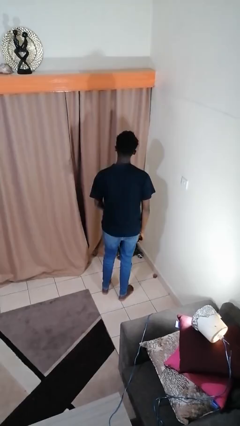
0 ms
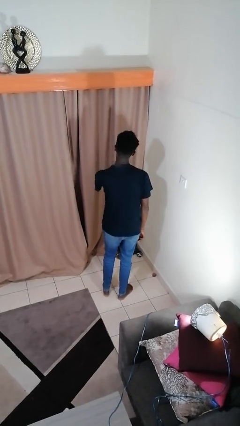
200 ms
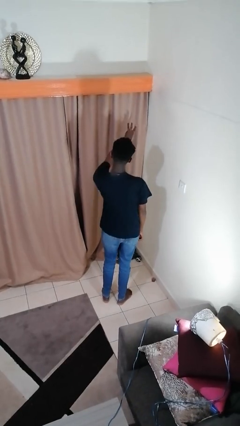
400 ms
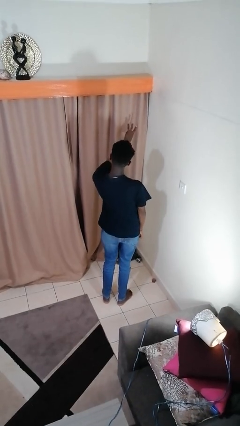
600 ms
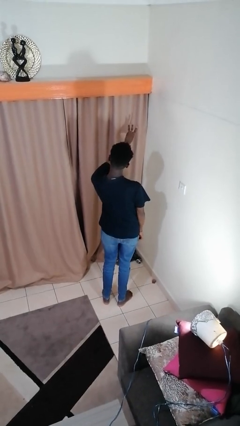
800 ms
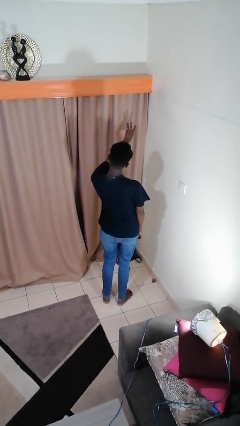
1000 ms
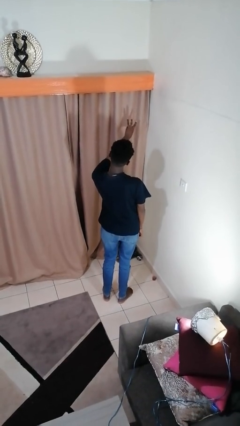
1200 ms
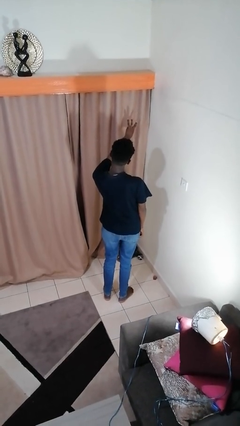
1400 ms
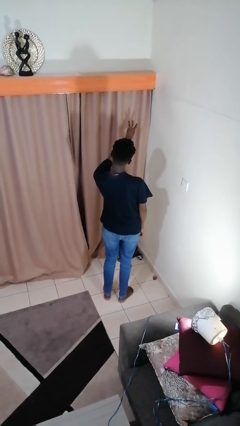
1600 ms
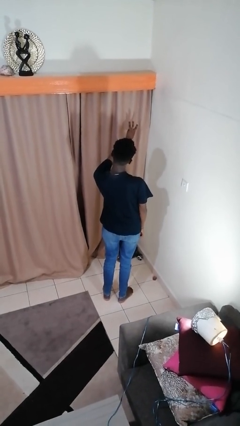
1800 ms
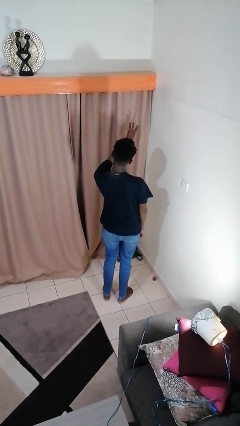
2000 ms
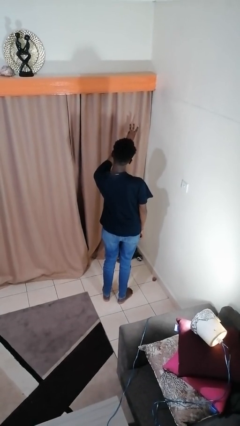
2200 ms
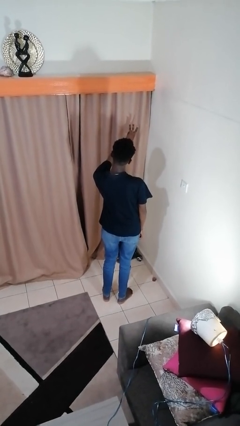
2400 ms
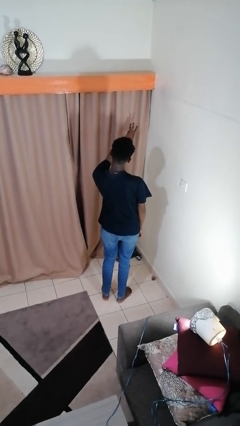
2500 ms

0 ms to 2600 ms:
person gestures number three

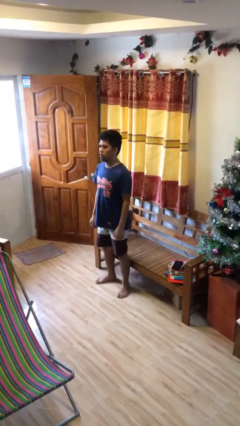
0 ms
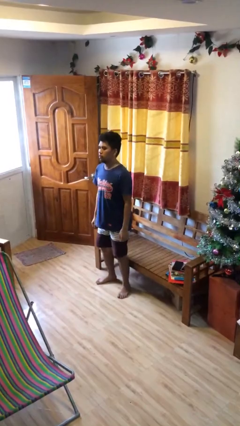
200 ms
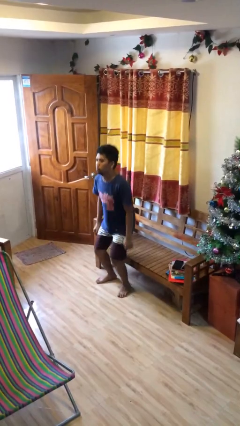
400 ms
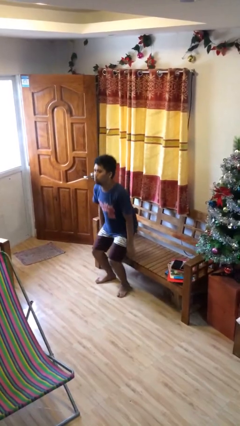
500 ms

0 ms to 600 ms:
person sits down

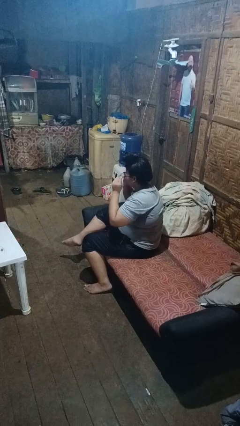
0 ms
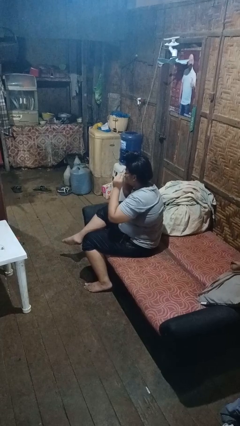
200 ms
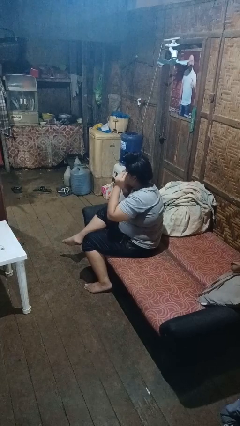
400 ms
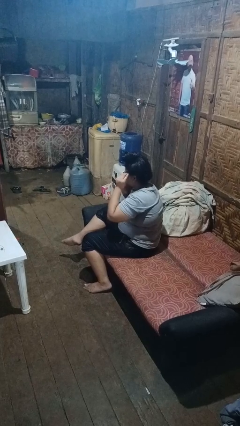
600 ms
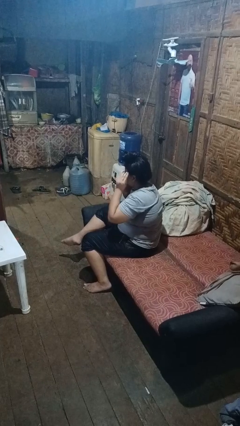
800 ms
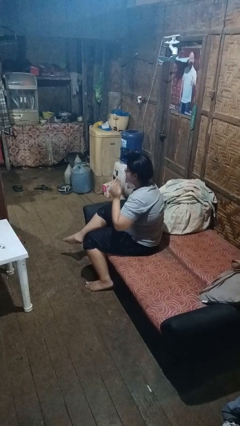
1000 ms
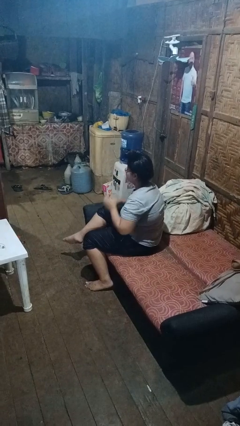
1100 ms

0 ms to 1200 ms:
person puts on glasses

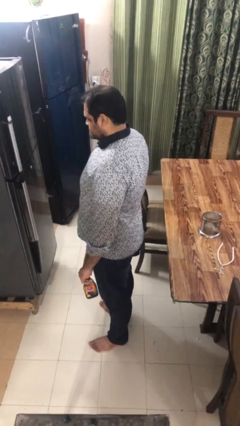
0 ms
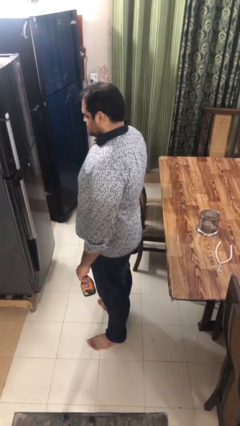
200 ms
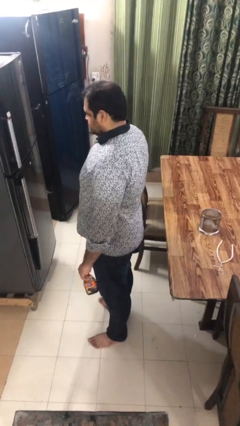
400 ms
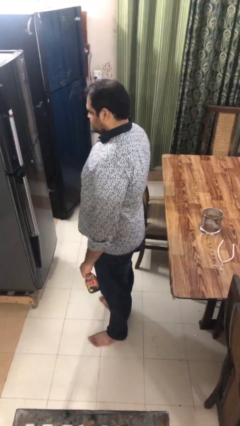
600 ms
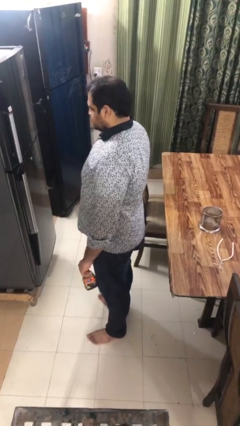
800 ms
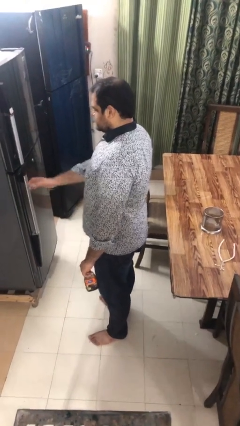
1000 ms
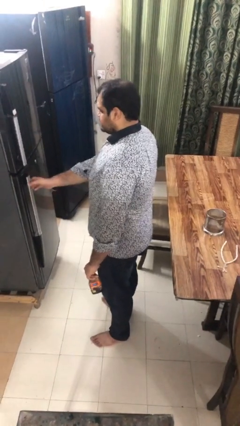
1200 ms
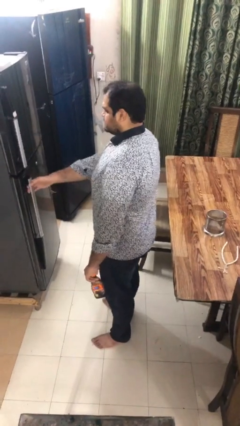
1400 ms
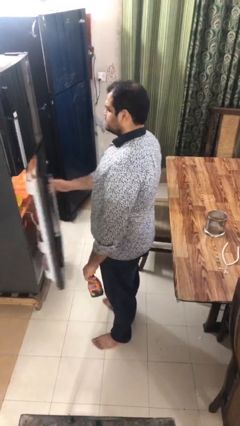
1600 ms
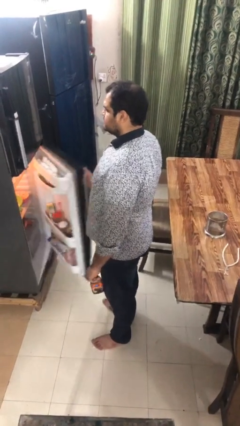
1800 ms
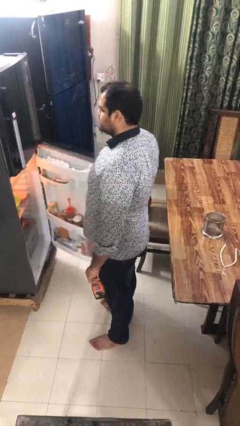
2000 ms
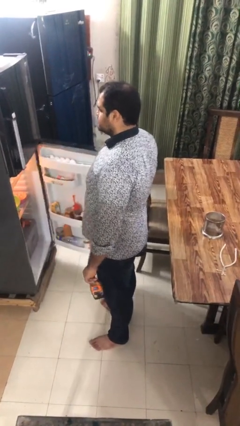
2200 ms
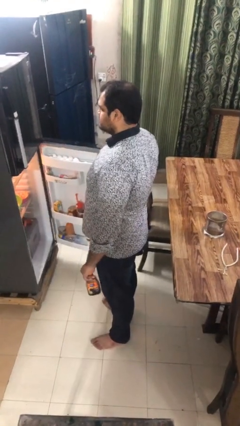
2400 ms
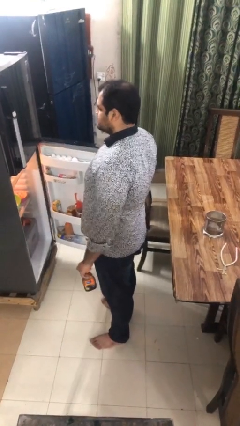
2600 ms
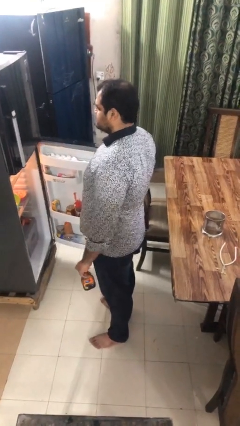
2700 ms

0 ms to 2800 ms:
person opens refrigerator

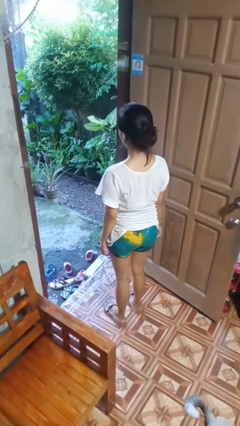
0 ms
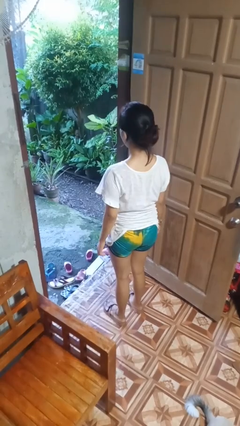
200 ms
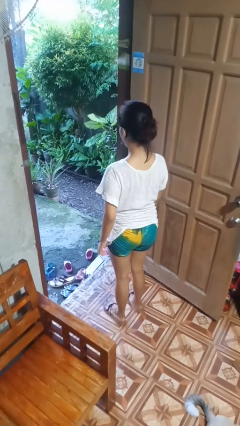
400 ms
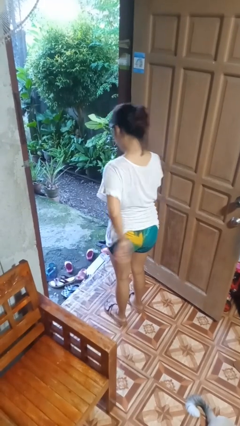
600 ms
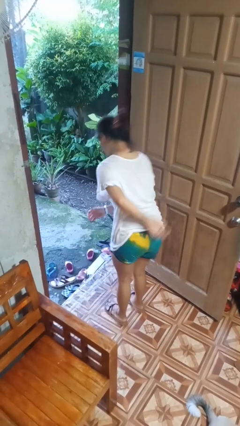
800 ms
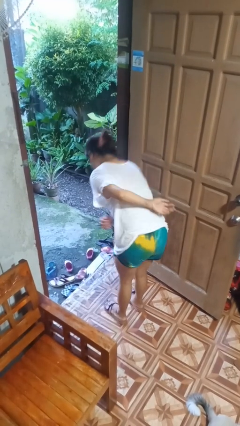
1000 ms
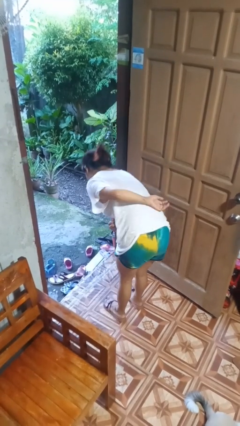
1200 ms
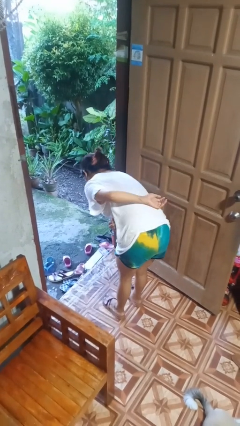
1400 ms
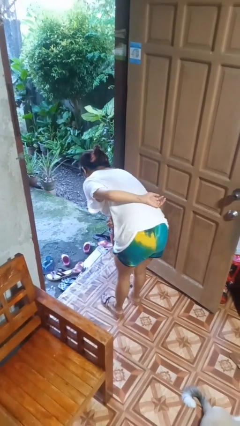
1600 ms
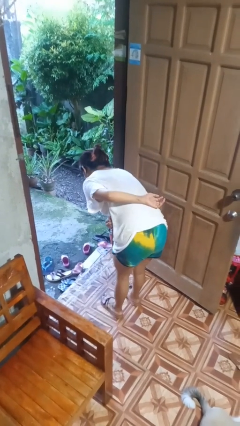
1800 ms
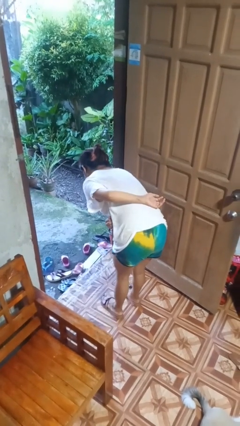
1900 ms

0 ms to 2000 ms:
person bows

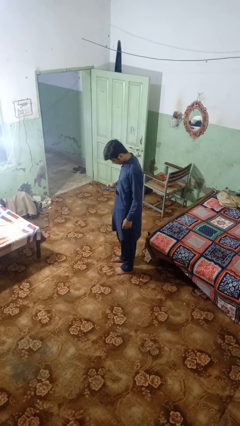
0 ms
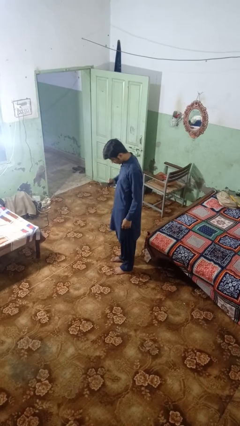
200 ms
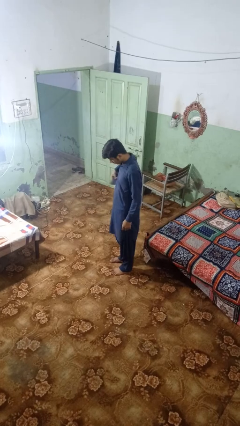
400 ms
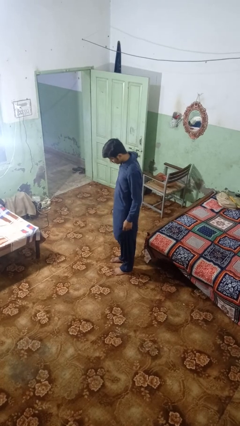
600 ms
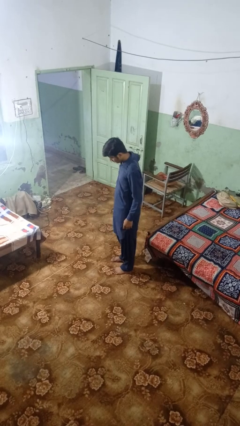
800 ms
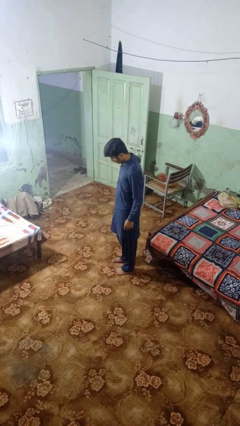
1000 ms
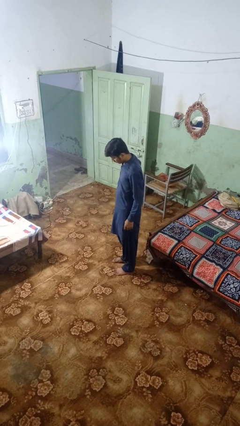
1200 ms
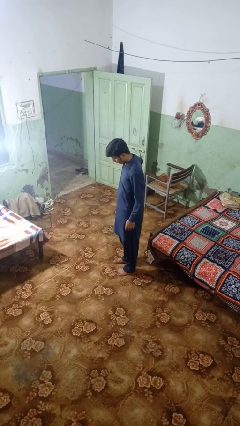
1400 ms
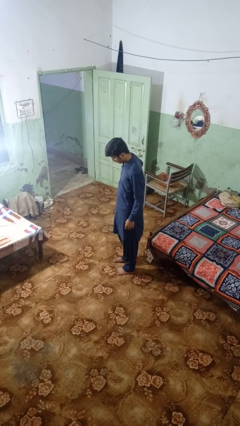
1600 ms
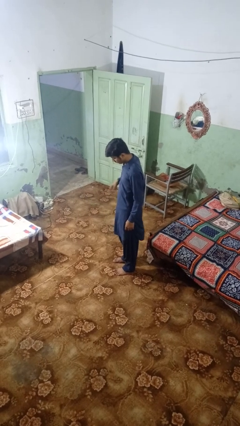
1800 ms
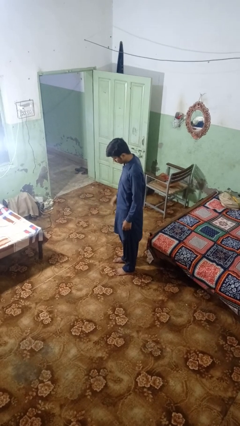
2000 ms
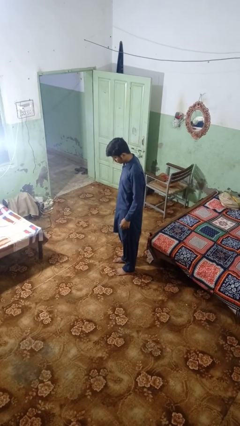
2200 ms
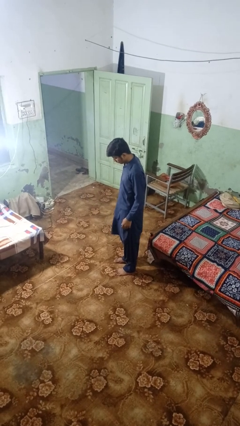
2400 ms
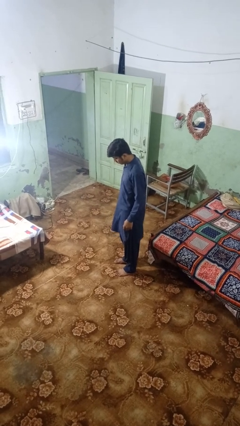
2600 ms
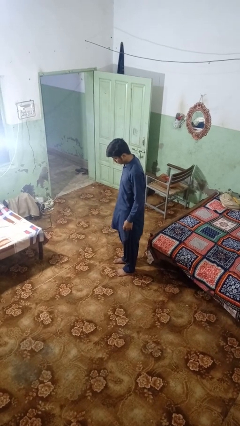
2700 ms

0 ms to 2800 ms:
person puts phone into pocket

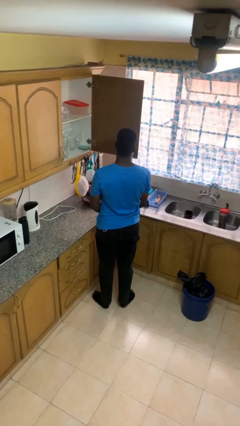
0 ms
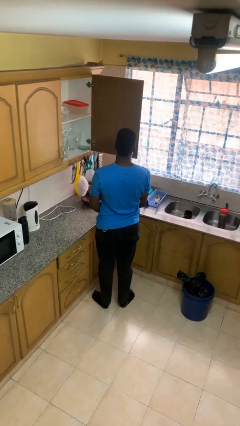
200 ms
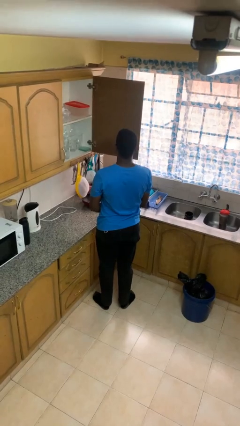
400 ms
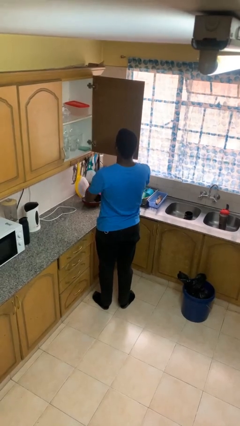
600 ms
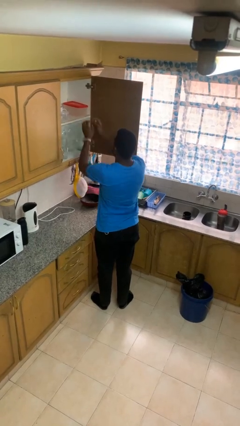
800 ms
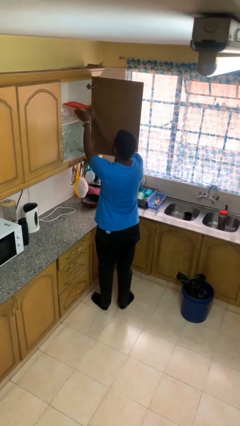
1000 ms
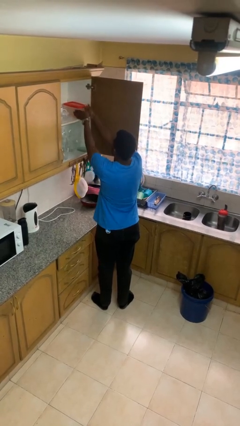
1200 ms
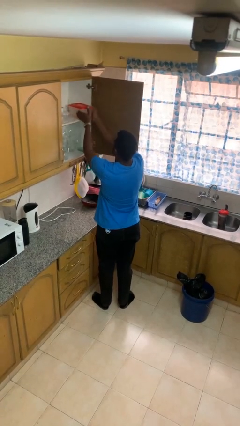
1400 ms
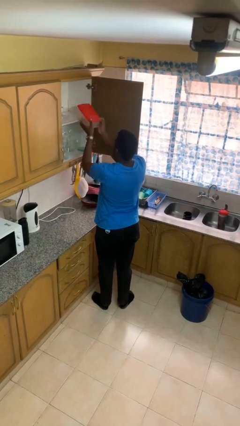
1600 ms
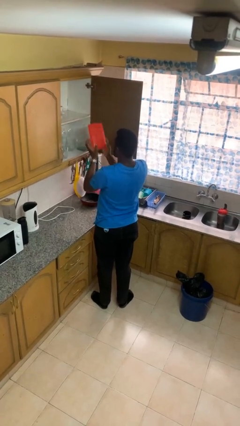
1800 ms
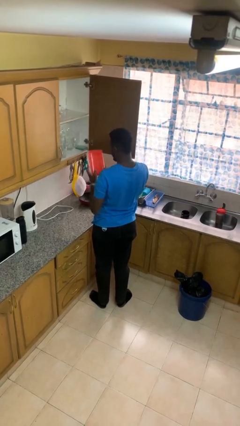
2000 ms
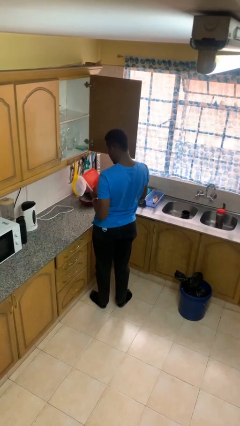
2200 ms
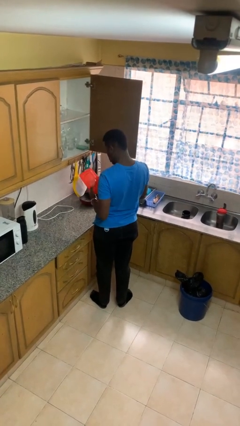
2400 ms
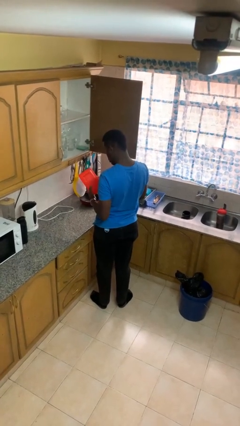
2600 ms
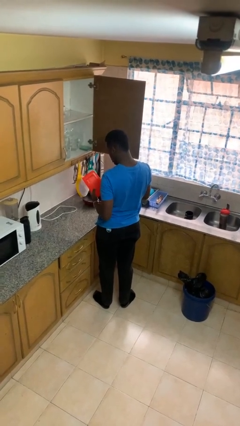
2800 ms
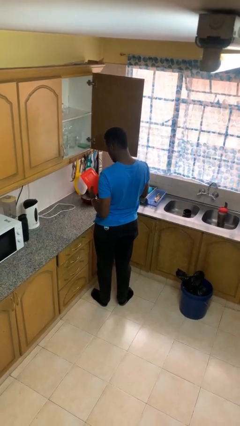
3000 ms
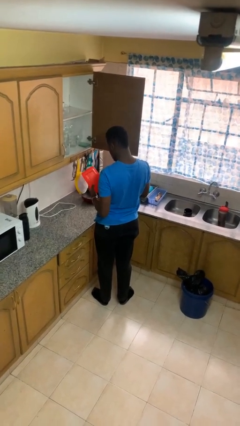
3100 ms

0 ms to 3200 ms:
person picks up object from cabinet

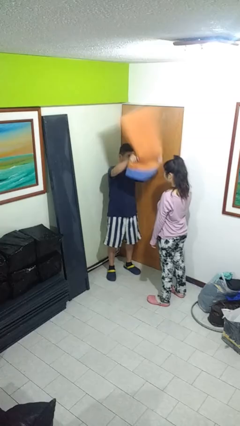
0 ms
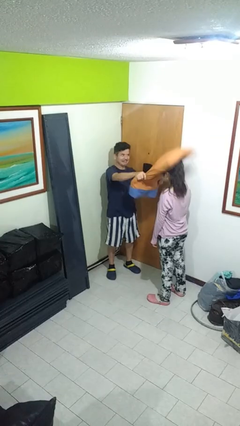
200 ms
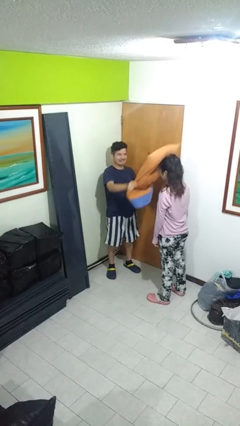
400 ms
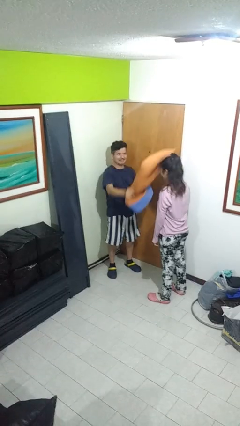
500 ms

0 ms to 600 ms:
person hits person with pillow

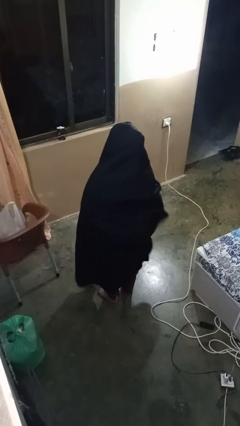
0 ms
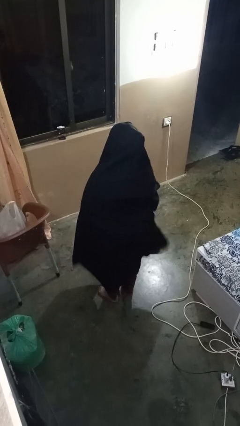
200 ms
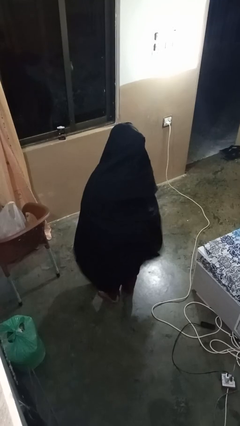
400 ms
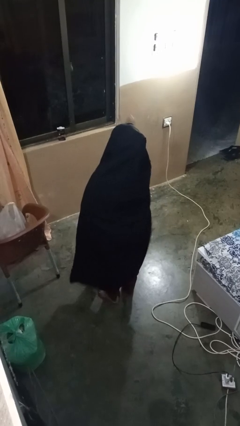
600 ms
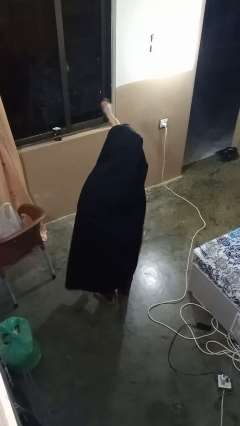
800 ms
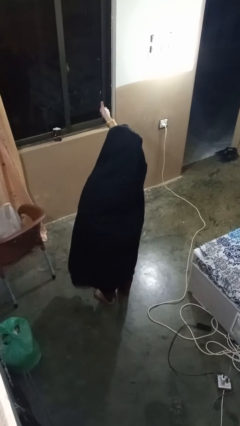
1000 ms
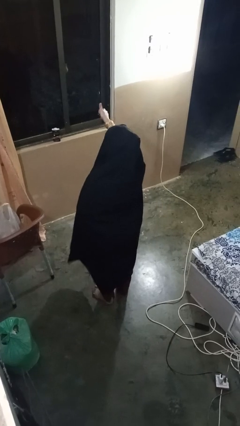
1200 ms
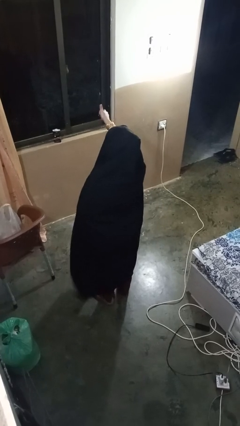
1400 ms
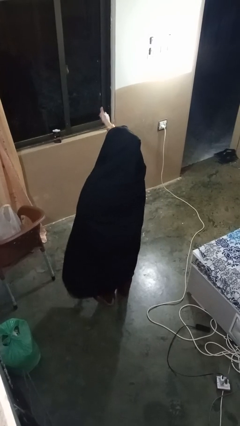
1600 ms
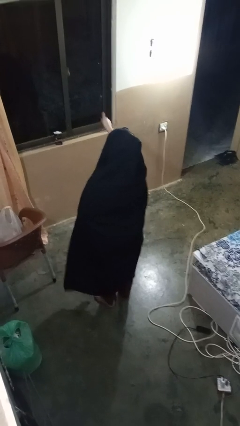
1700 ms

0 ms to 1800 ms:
person gestures thumbs up
